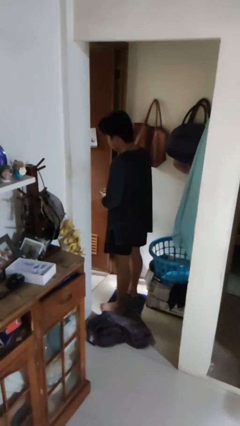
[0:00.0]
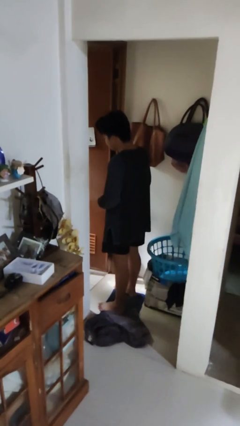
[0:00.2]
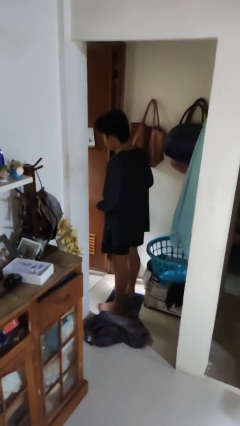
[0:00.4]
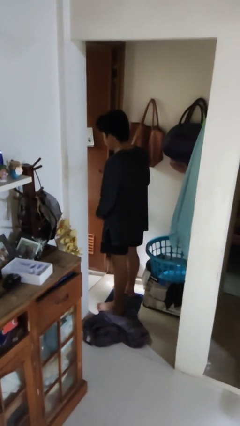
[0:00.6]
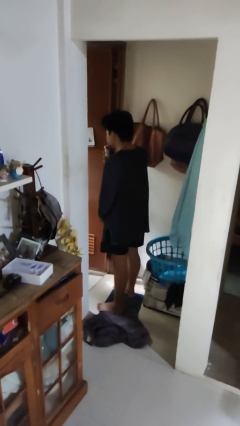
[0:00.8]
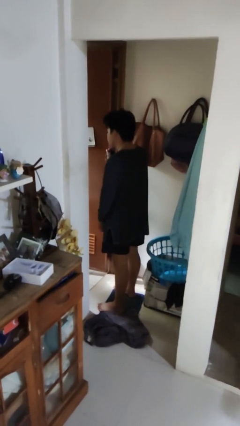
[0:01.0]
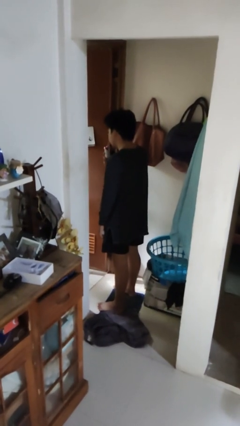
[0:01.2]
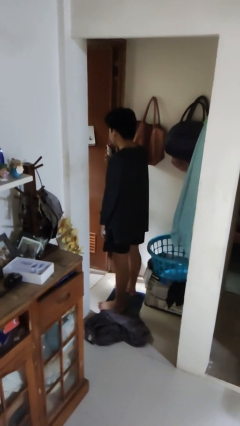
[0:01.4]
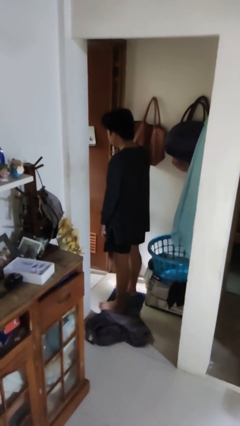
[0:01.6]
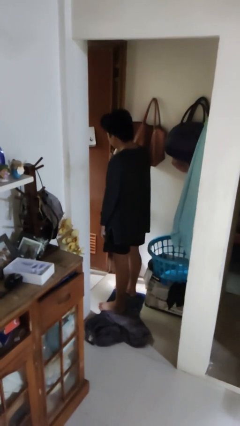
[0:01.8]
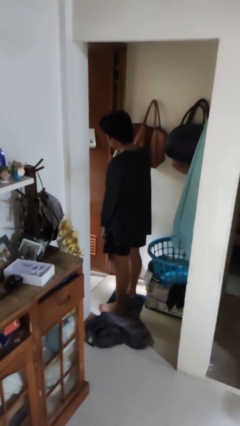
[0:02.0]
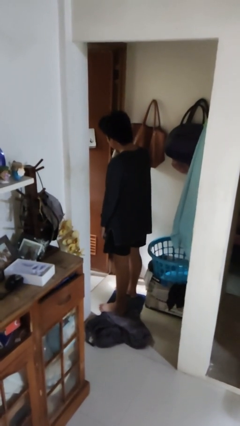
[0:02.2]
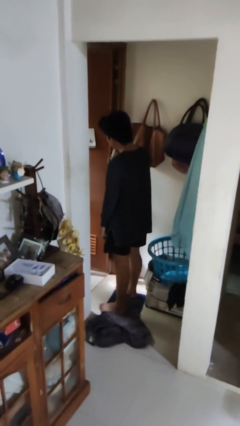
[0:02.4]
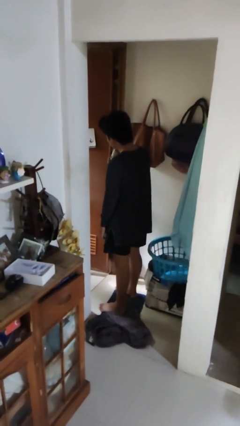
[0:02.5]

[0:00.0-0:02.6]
person shaves face

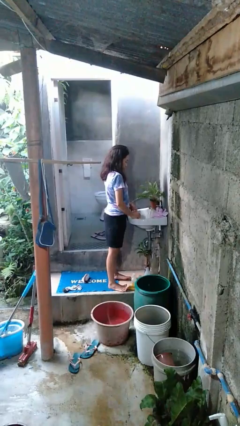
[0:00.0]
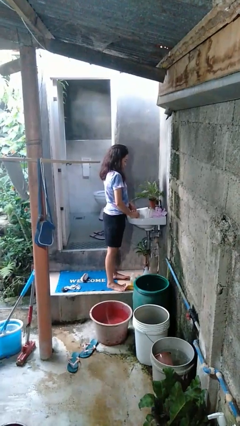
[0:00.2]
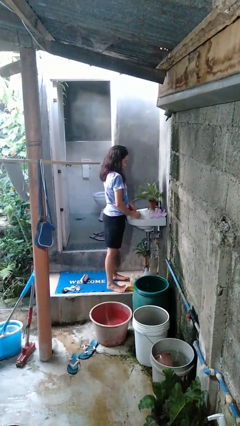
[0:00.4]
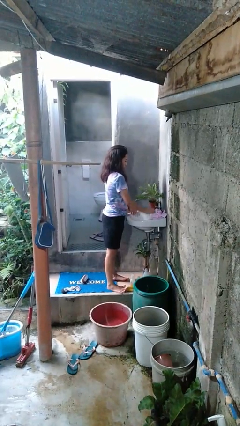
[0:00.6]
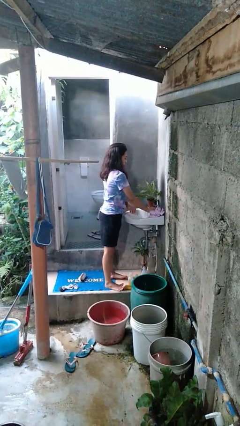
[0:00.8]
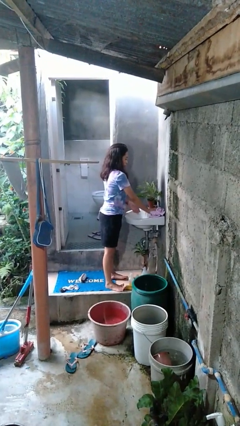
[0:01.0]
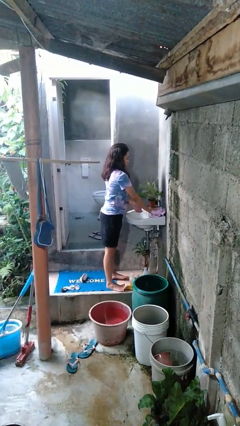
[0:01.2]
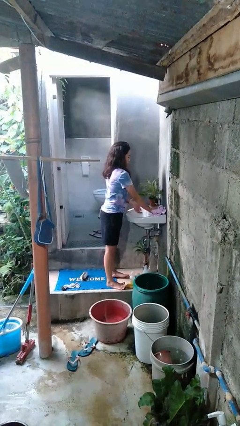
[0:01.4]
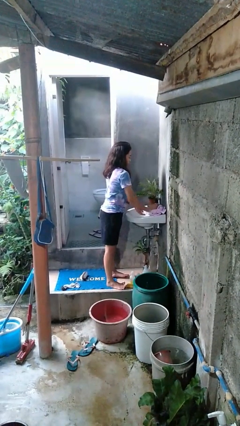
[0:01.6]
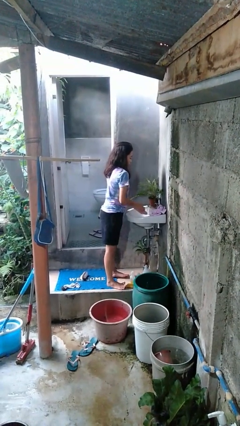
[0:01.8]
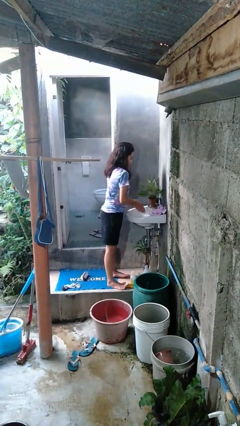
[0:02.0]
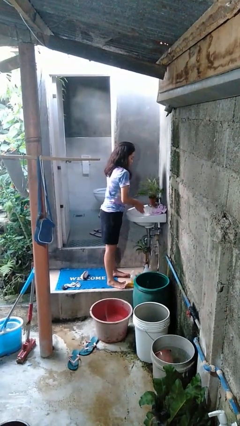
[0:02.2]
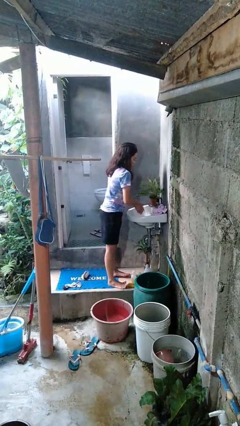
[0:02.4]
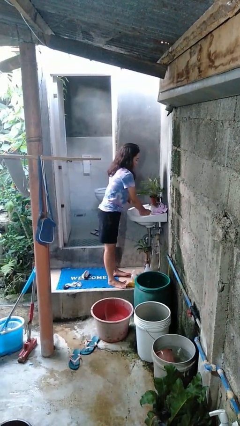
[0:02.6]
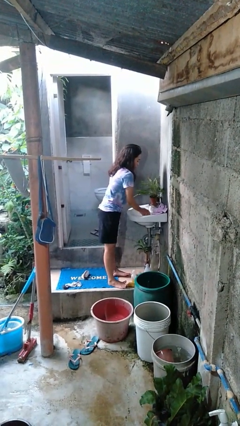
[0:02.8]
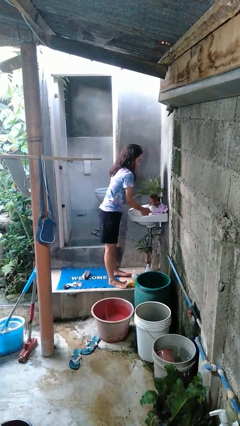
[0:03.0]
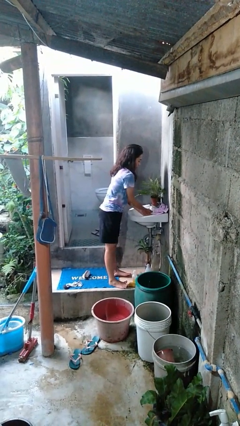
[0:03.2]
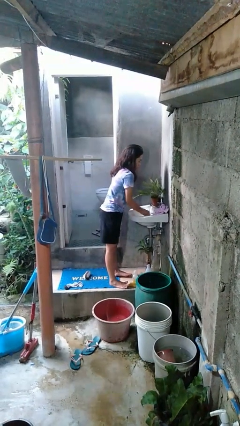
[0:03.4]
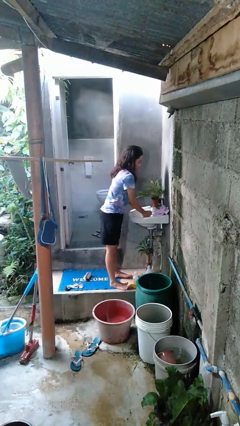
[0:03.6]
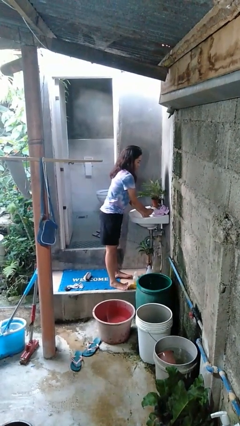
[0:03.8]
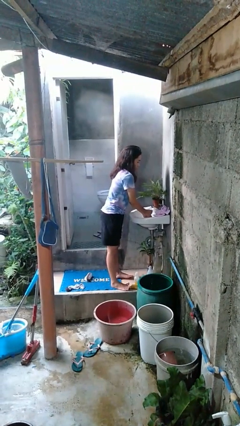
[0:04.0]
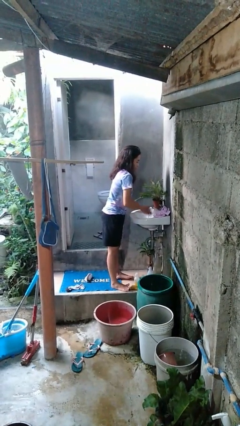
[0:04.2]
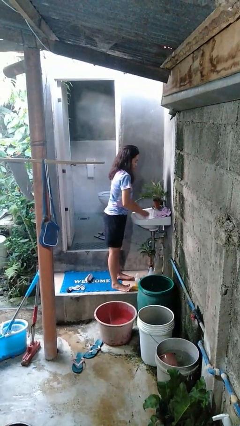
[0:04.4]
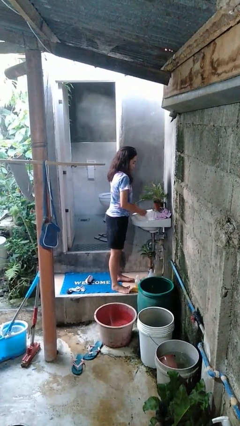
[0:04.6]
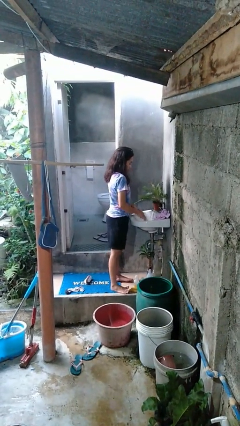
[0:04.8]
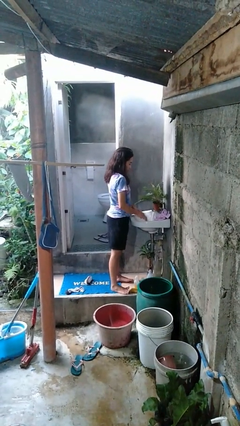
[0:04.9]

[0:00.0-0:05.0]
person washes hands

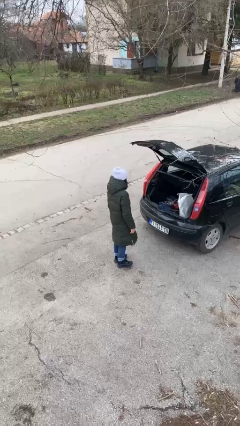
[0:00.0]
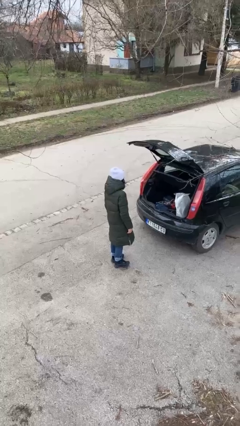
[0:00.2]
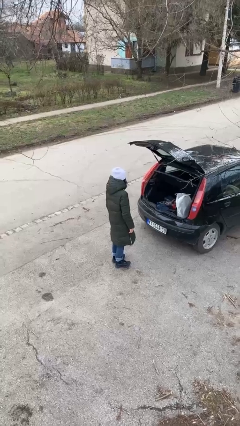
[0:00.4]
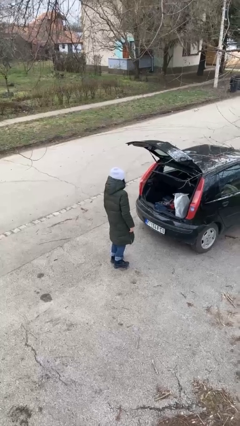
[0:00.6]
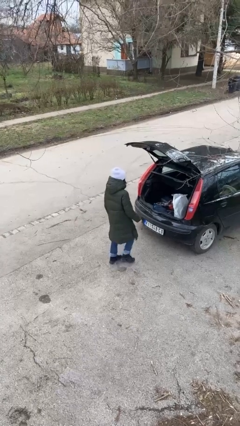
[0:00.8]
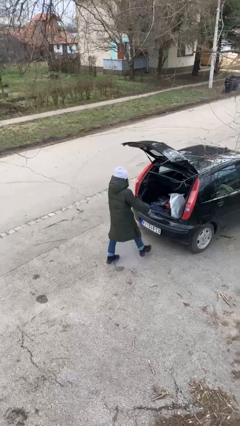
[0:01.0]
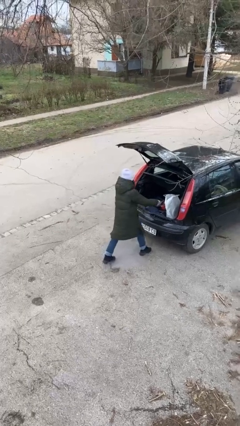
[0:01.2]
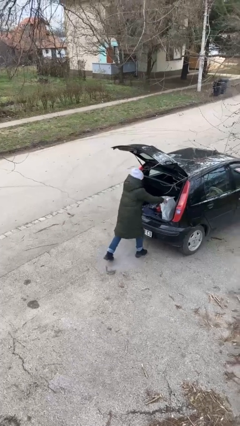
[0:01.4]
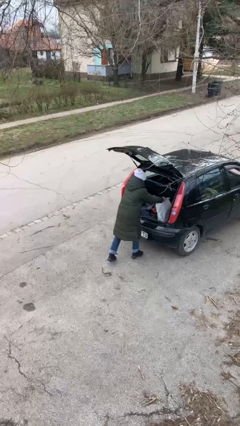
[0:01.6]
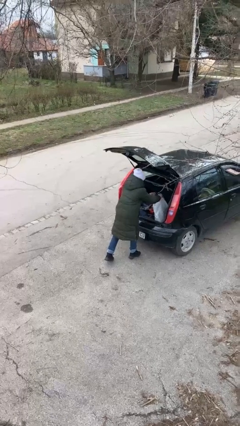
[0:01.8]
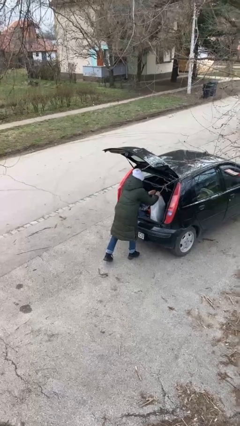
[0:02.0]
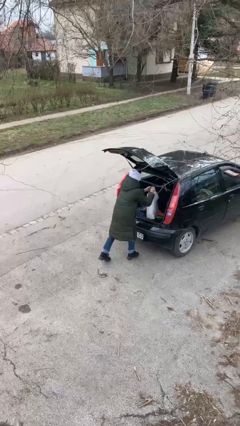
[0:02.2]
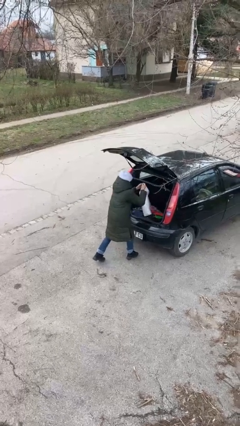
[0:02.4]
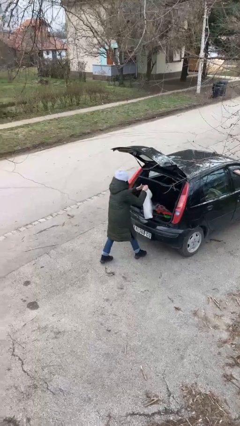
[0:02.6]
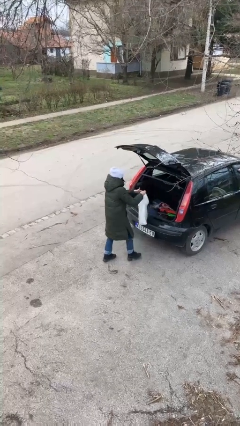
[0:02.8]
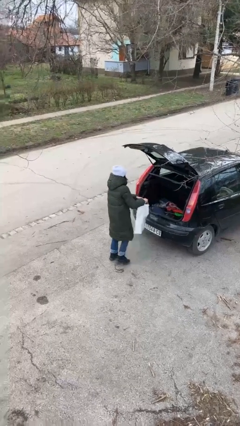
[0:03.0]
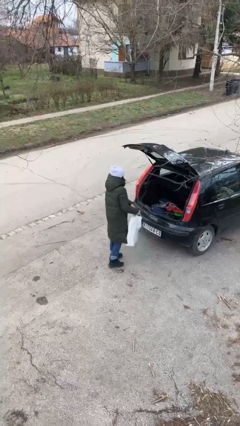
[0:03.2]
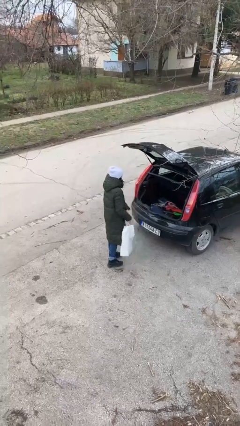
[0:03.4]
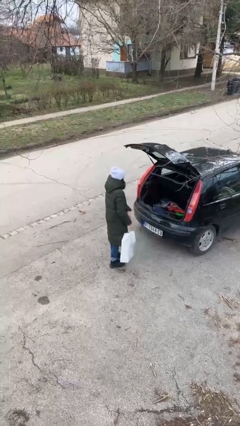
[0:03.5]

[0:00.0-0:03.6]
person unloads car

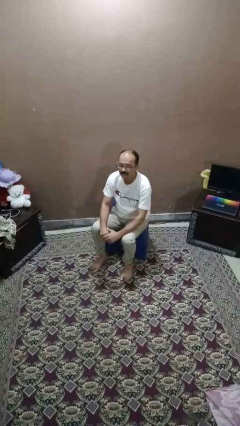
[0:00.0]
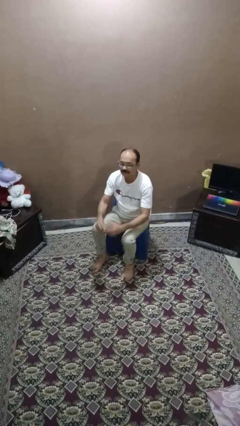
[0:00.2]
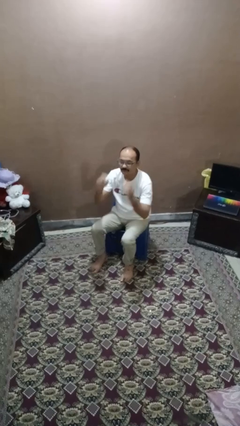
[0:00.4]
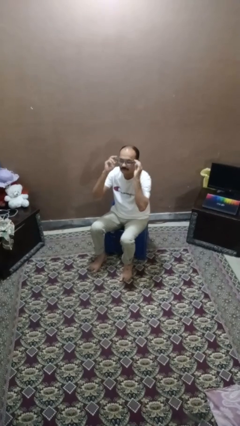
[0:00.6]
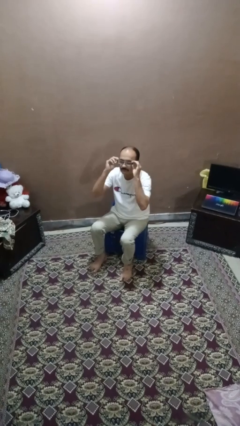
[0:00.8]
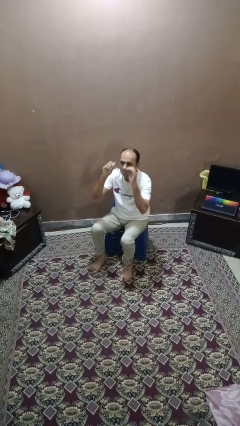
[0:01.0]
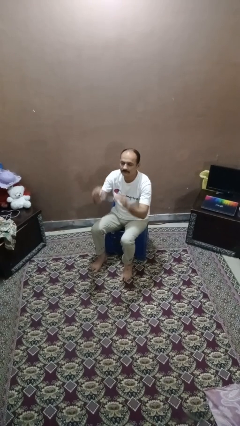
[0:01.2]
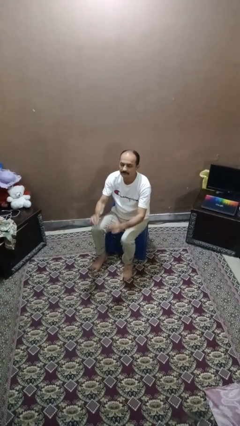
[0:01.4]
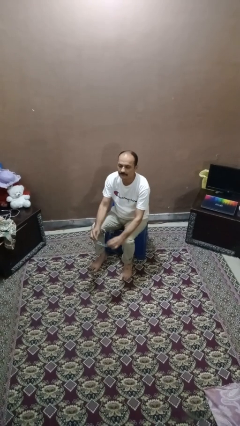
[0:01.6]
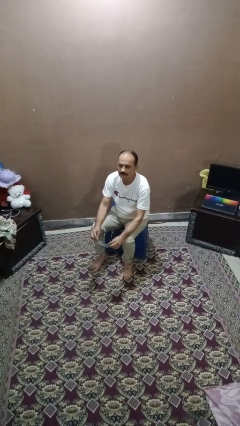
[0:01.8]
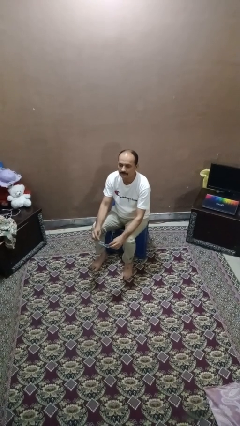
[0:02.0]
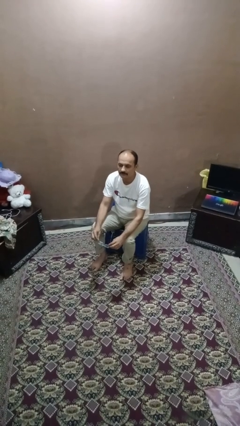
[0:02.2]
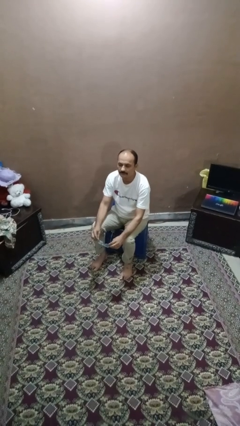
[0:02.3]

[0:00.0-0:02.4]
person takes off glasses

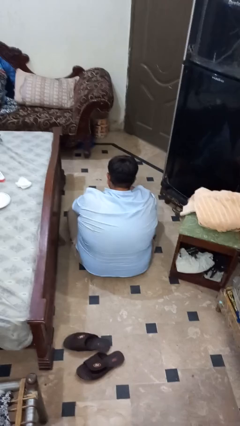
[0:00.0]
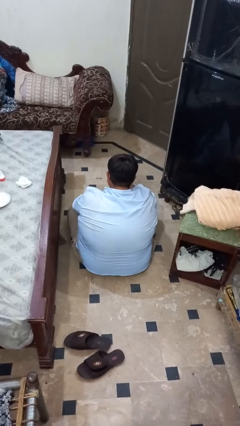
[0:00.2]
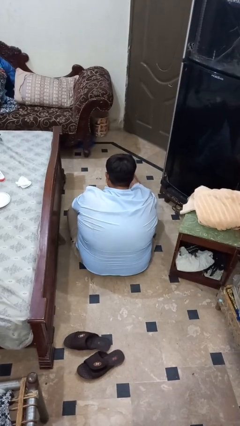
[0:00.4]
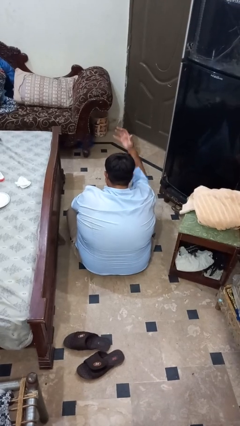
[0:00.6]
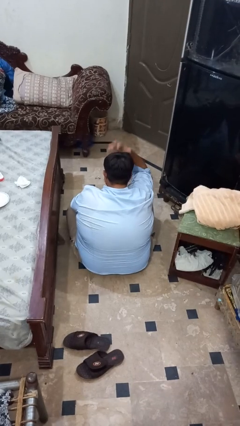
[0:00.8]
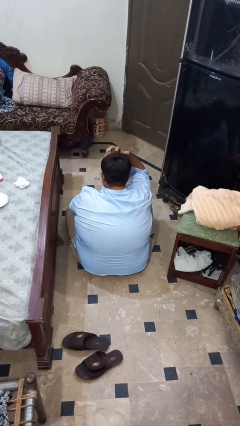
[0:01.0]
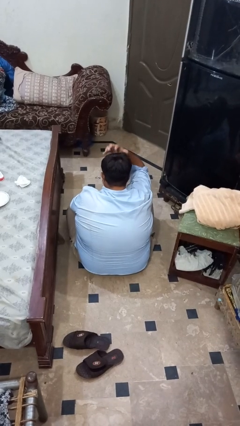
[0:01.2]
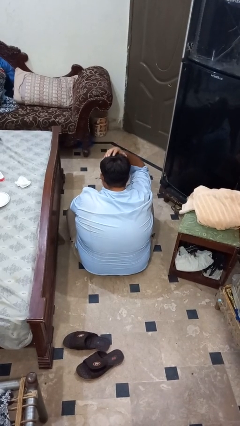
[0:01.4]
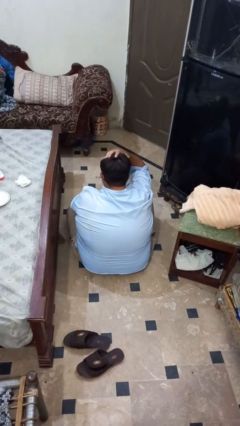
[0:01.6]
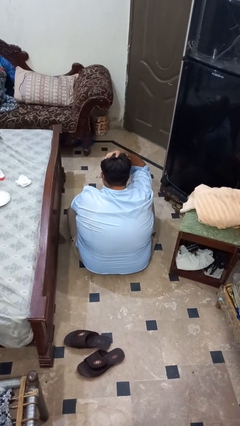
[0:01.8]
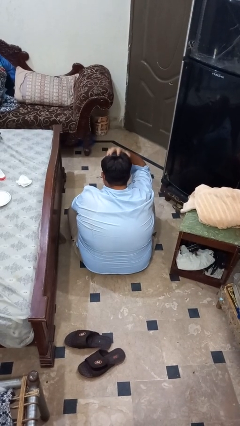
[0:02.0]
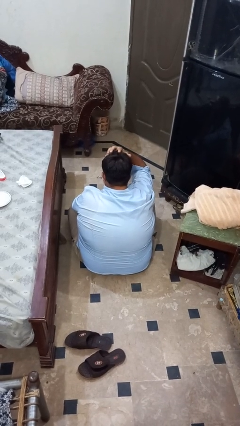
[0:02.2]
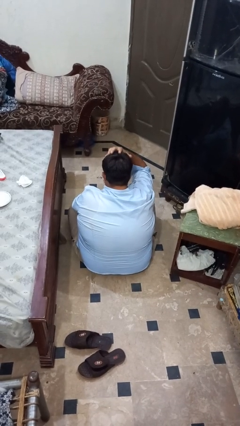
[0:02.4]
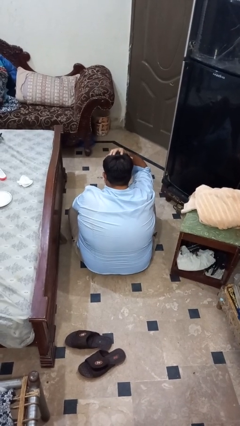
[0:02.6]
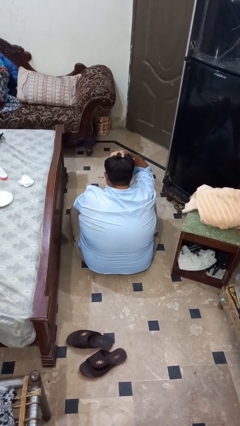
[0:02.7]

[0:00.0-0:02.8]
person pats head

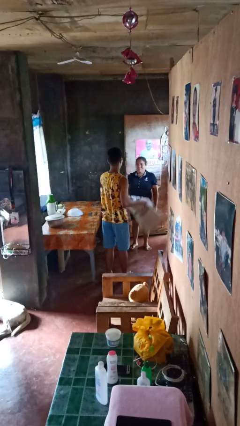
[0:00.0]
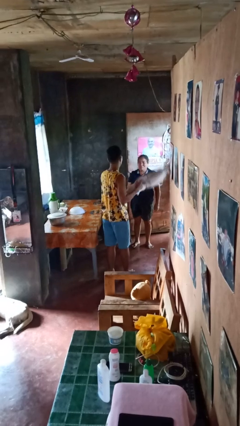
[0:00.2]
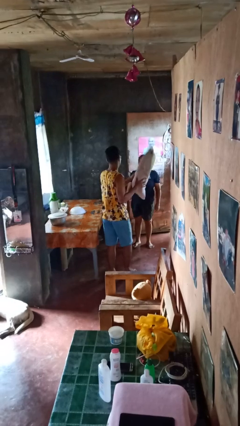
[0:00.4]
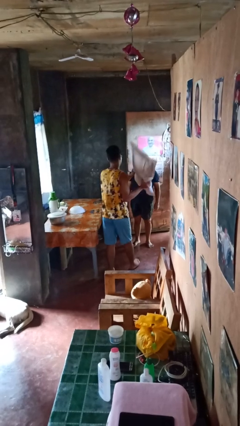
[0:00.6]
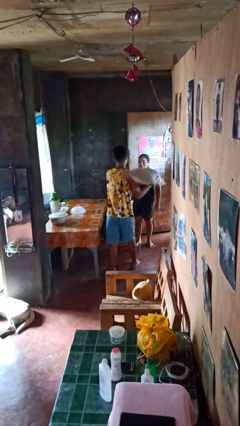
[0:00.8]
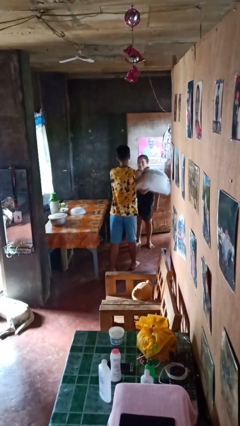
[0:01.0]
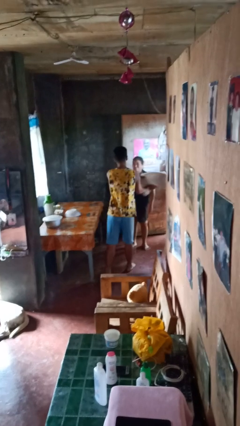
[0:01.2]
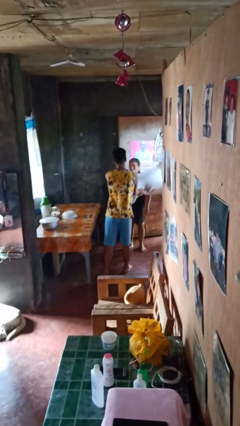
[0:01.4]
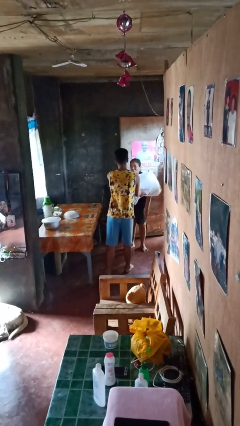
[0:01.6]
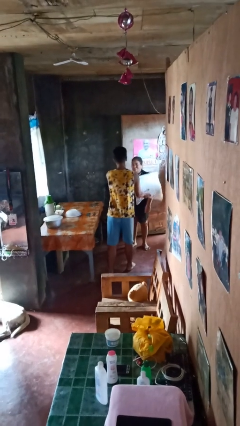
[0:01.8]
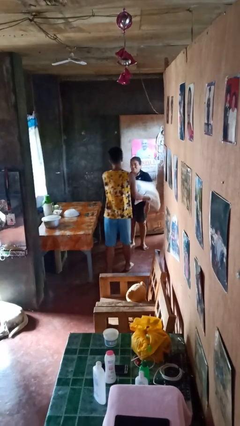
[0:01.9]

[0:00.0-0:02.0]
person hits person with pillow
